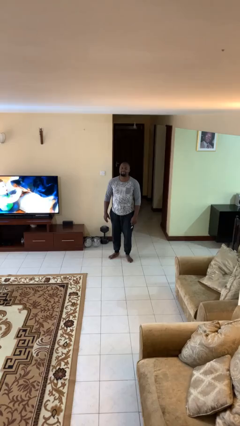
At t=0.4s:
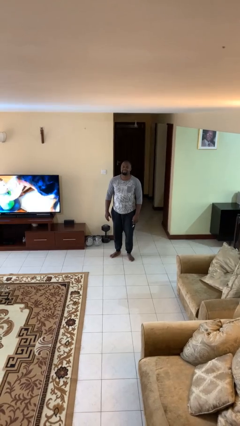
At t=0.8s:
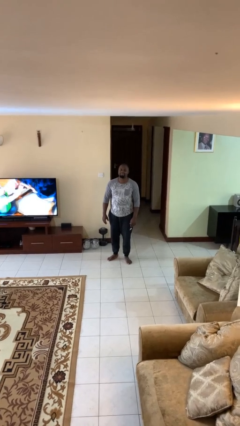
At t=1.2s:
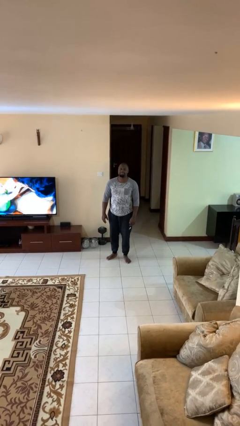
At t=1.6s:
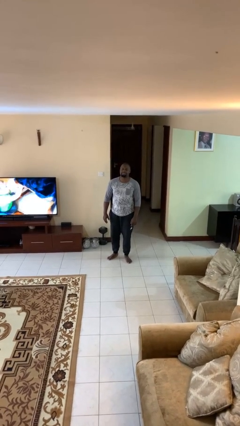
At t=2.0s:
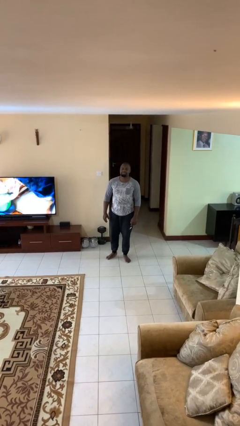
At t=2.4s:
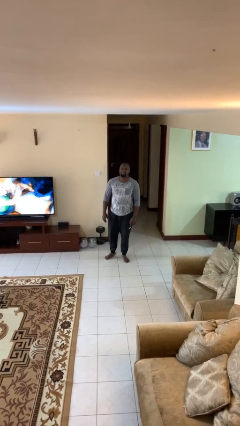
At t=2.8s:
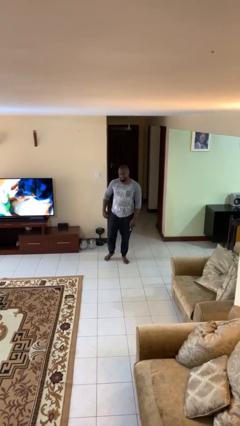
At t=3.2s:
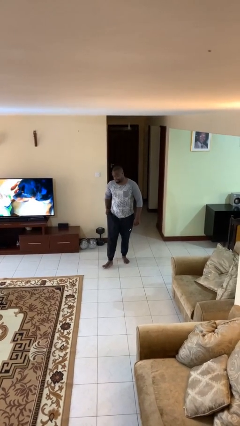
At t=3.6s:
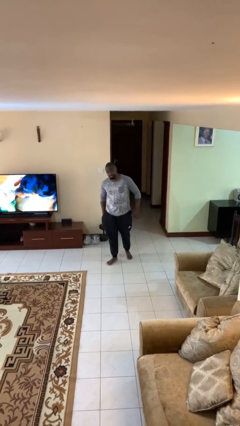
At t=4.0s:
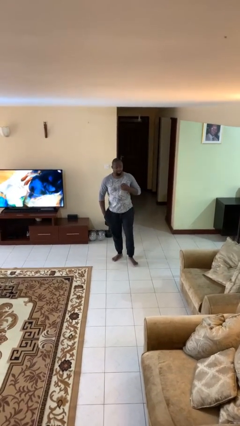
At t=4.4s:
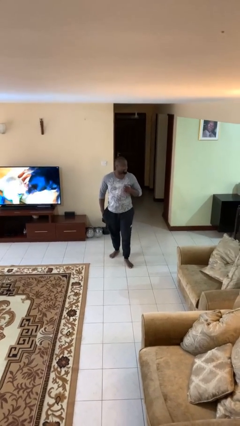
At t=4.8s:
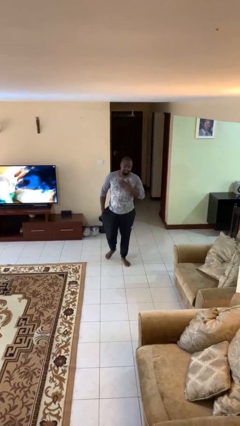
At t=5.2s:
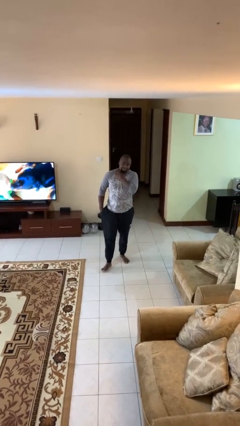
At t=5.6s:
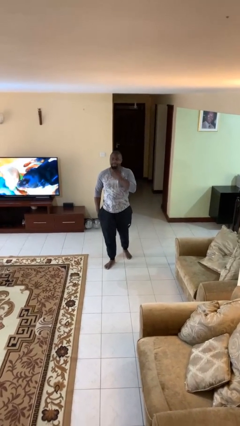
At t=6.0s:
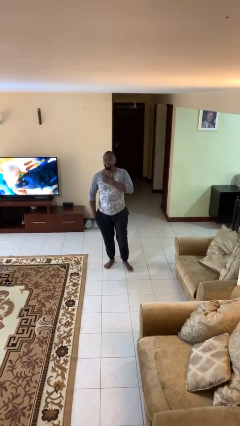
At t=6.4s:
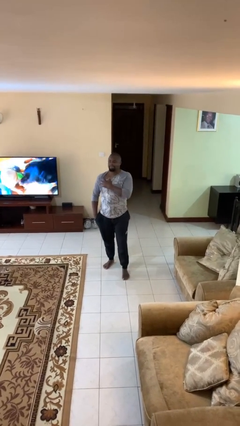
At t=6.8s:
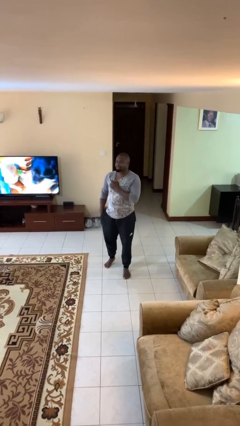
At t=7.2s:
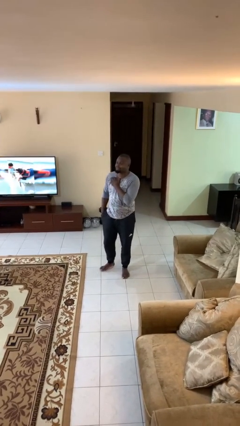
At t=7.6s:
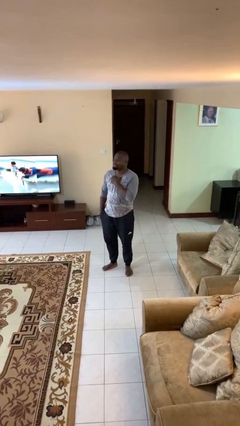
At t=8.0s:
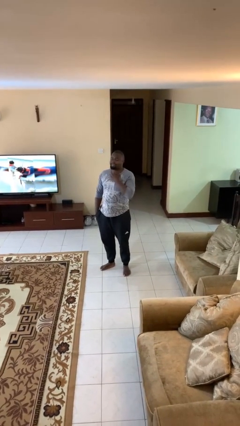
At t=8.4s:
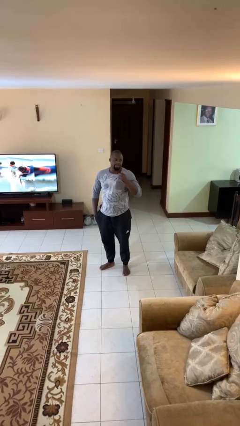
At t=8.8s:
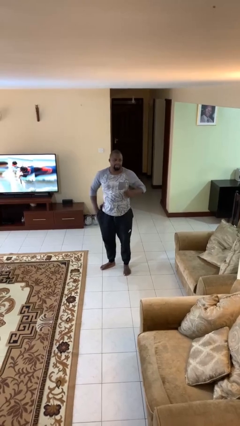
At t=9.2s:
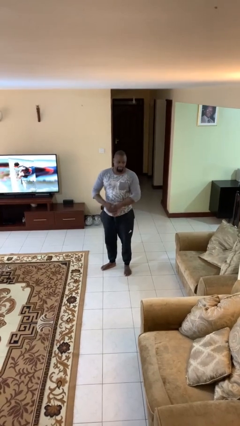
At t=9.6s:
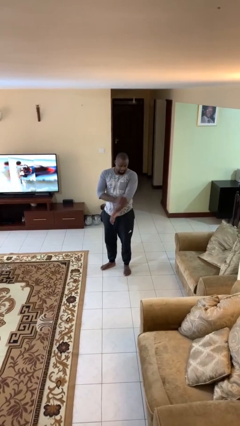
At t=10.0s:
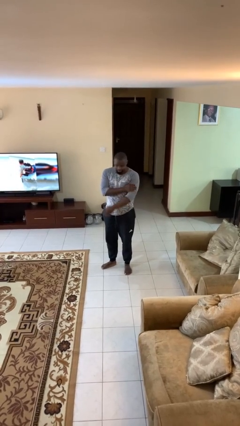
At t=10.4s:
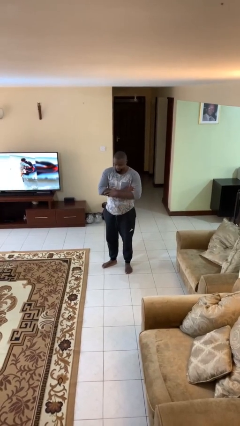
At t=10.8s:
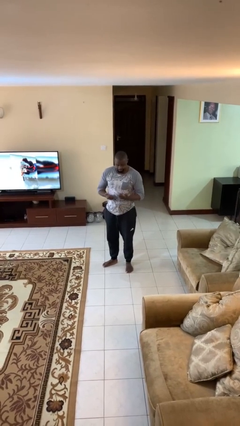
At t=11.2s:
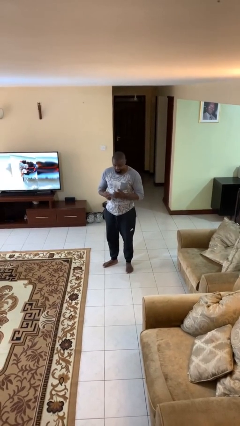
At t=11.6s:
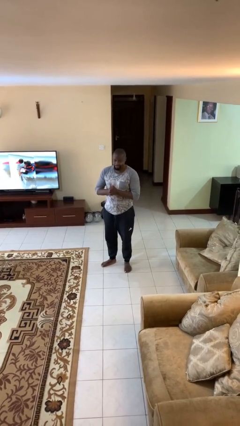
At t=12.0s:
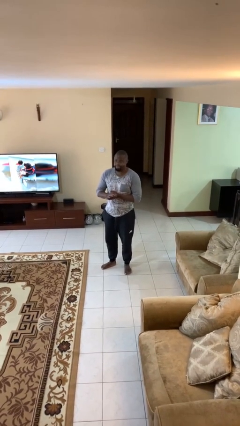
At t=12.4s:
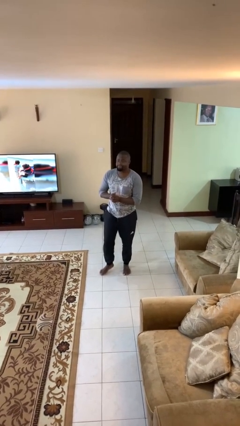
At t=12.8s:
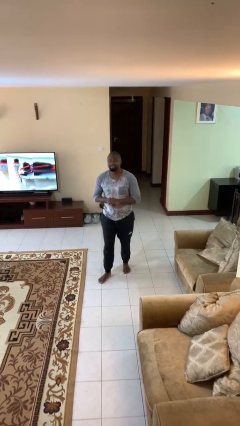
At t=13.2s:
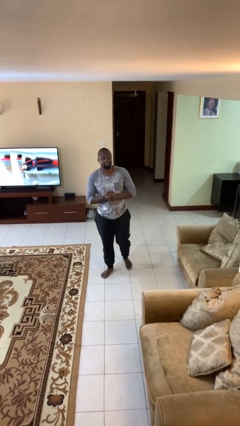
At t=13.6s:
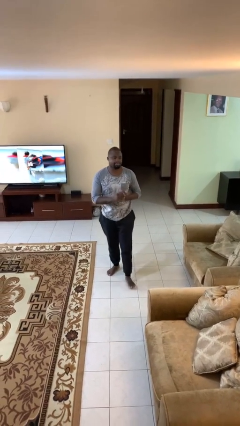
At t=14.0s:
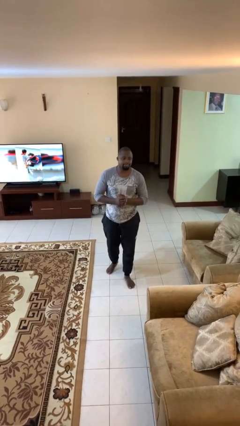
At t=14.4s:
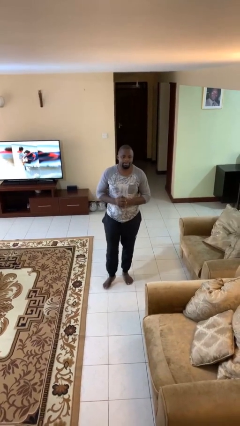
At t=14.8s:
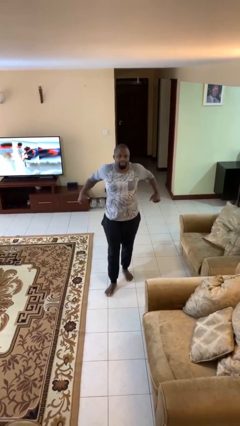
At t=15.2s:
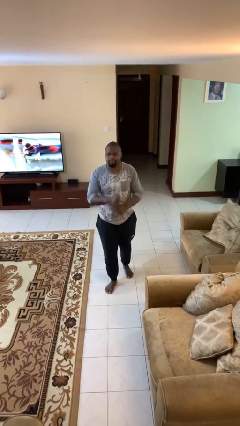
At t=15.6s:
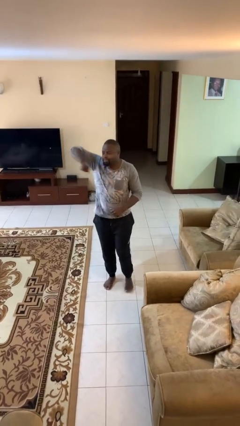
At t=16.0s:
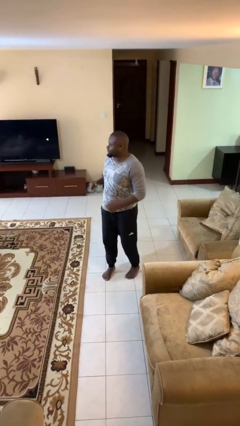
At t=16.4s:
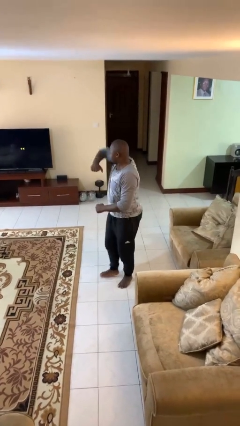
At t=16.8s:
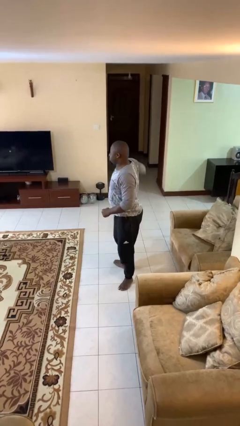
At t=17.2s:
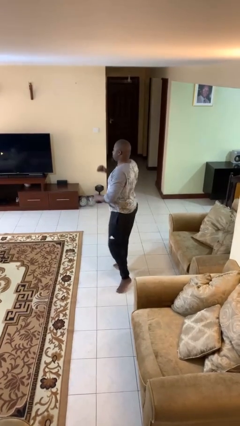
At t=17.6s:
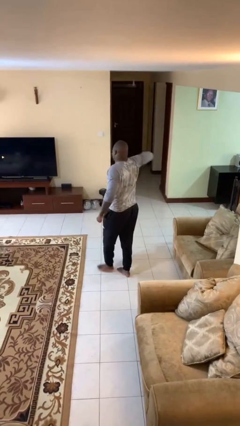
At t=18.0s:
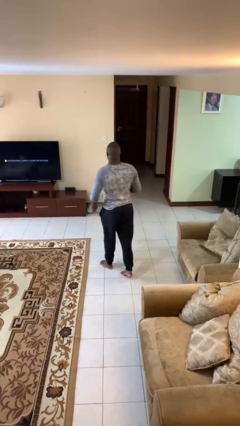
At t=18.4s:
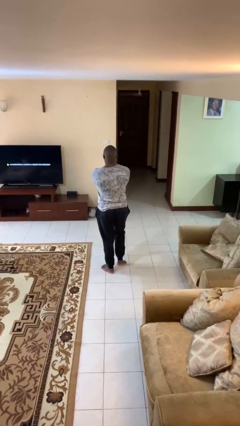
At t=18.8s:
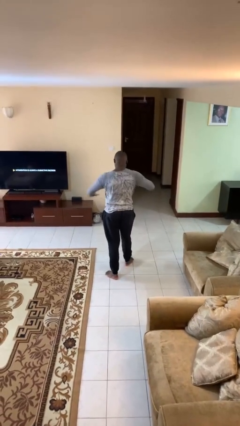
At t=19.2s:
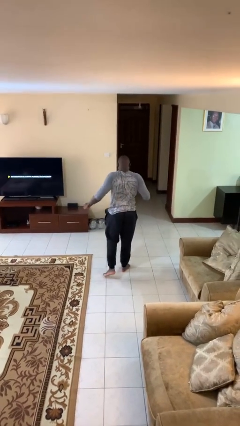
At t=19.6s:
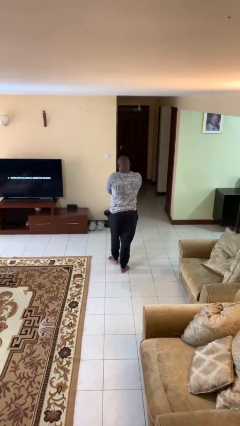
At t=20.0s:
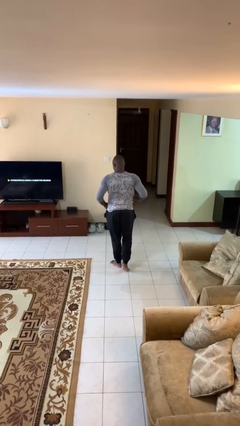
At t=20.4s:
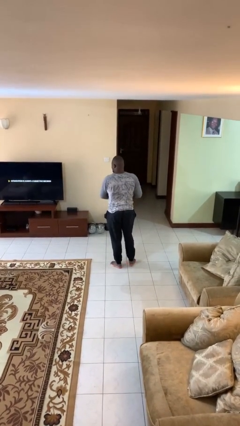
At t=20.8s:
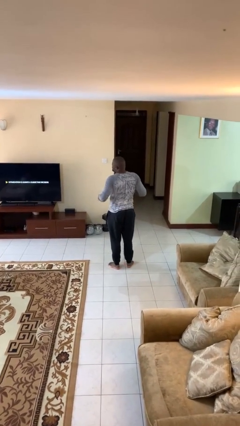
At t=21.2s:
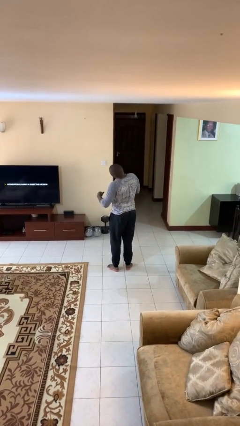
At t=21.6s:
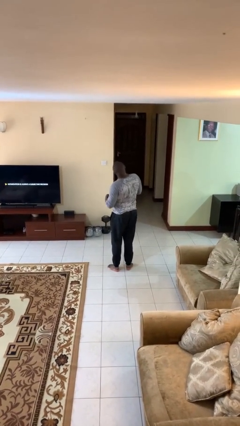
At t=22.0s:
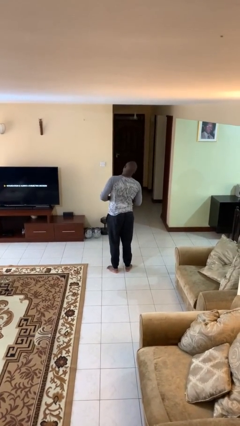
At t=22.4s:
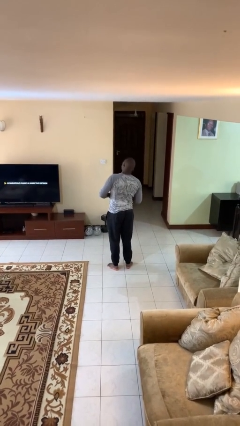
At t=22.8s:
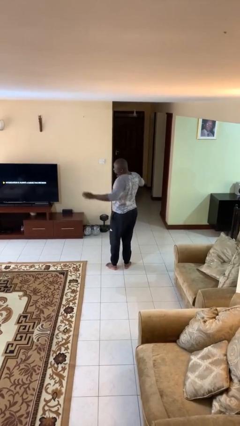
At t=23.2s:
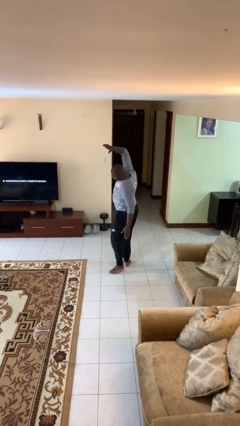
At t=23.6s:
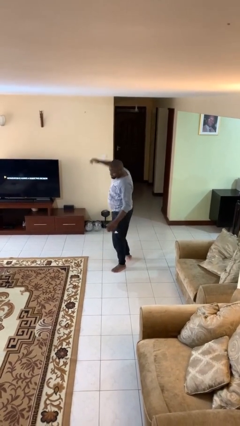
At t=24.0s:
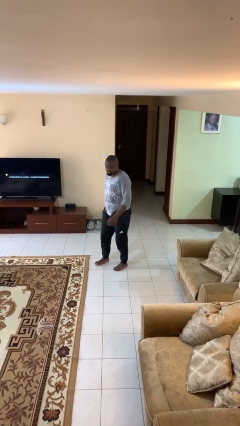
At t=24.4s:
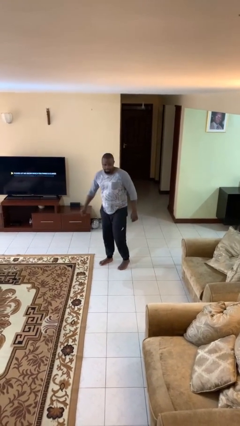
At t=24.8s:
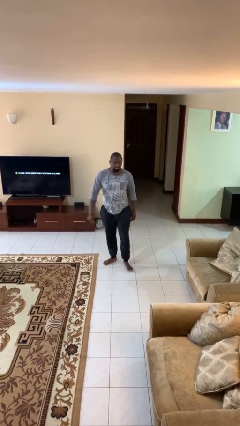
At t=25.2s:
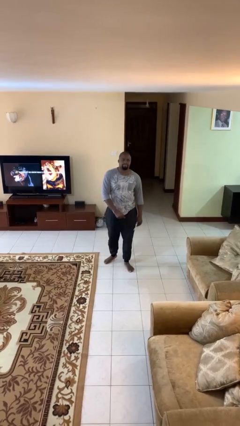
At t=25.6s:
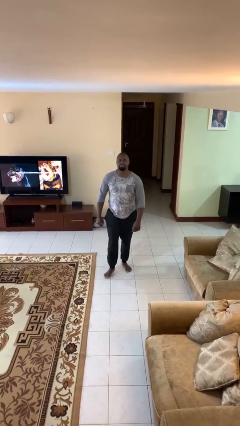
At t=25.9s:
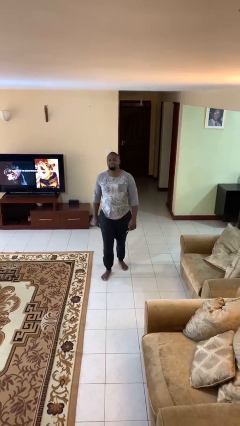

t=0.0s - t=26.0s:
person walks

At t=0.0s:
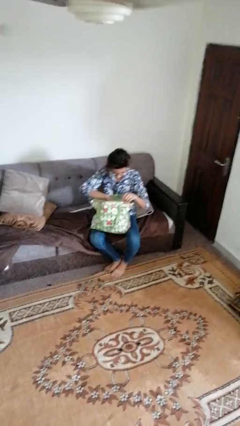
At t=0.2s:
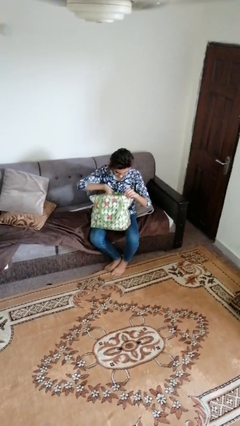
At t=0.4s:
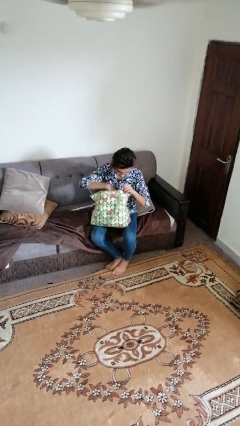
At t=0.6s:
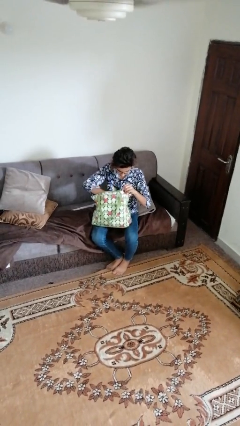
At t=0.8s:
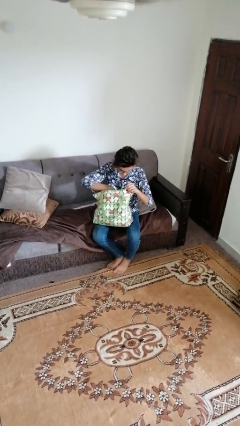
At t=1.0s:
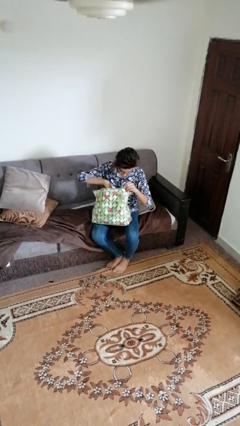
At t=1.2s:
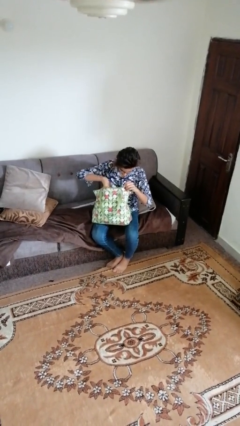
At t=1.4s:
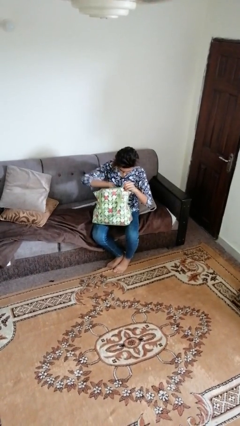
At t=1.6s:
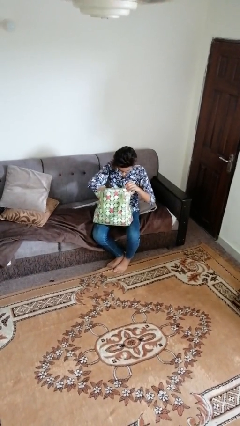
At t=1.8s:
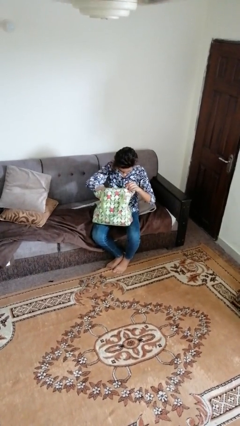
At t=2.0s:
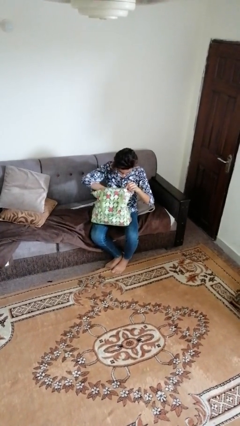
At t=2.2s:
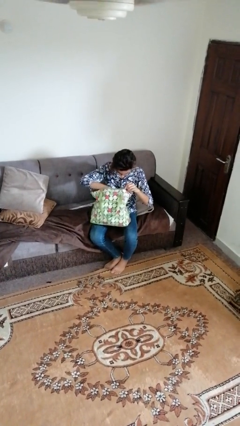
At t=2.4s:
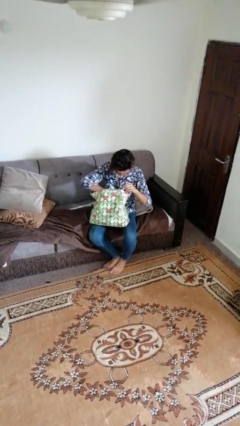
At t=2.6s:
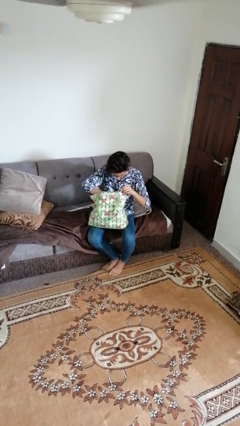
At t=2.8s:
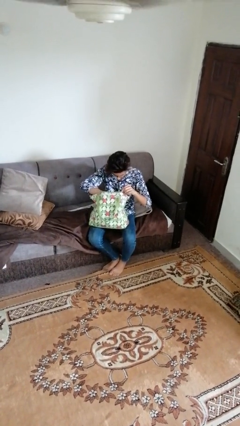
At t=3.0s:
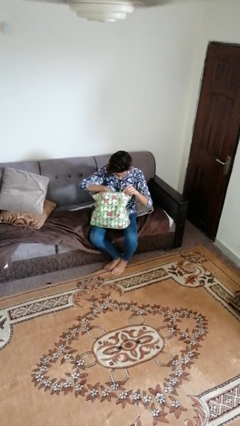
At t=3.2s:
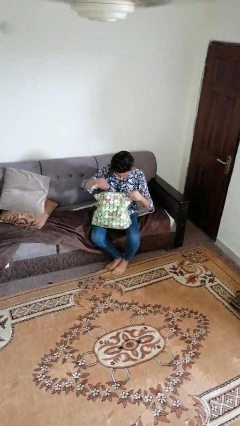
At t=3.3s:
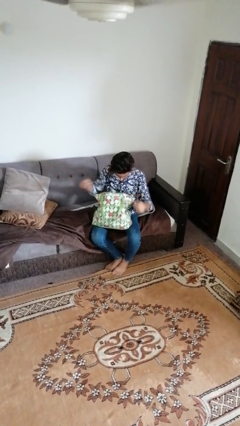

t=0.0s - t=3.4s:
person searches in bag

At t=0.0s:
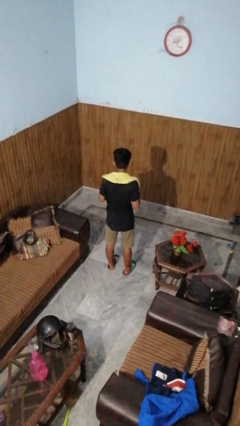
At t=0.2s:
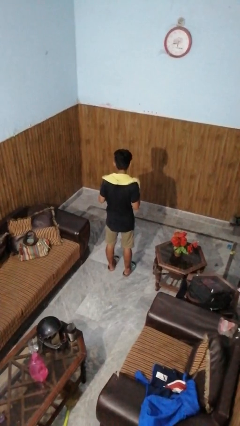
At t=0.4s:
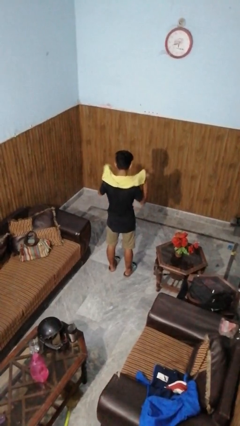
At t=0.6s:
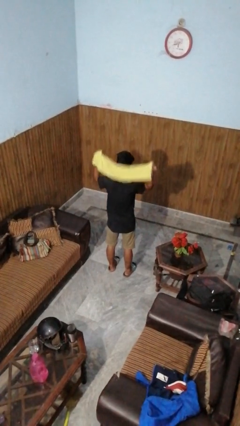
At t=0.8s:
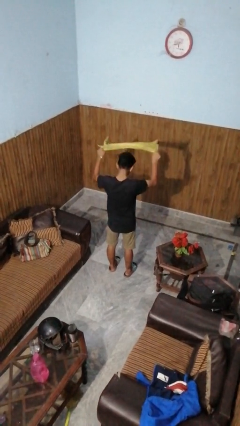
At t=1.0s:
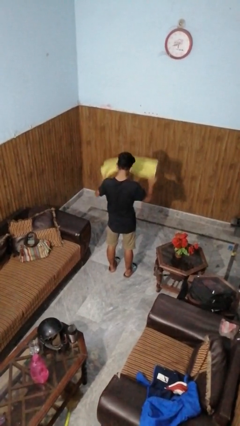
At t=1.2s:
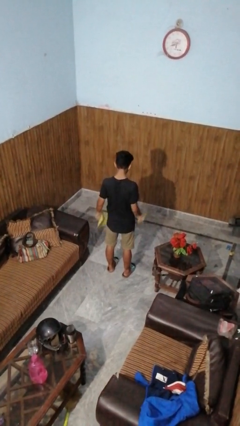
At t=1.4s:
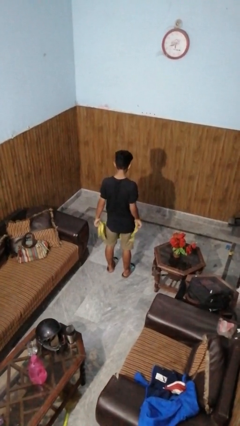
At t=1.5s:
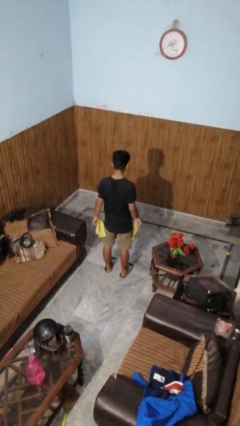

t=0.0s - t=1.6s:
person takes off scarf
